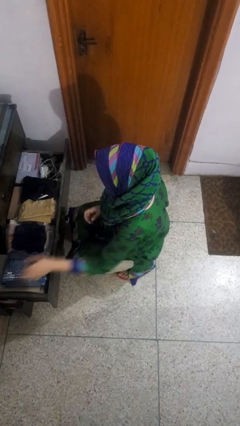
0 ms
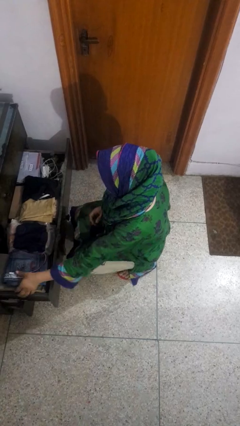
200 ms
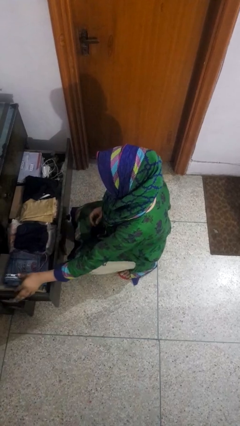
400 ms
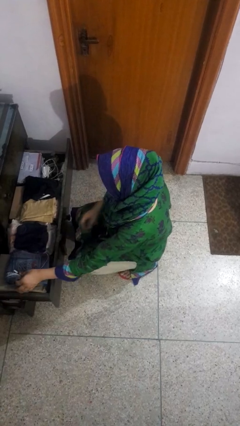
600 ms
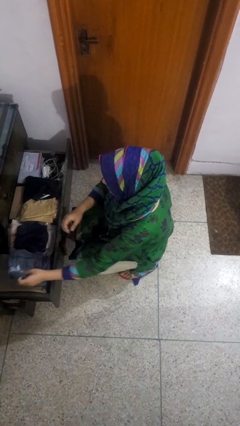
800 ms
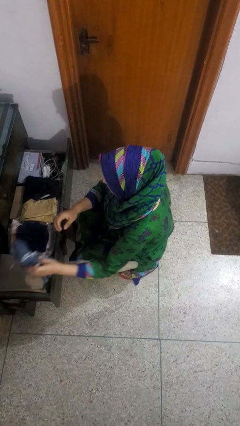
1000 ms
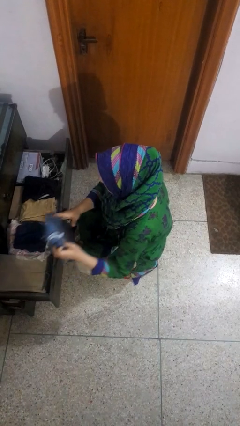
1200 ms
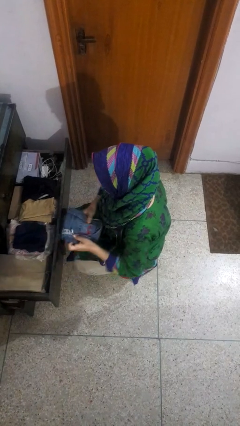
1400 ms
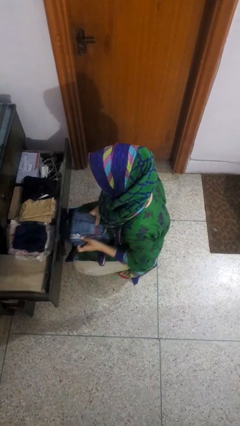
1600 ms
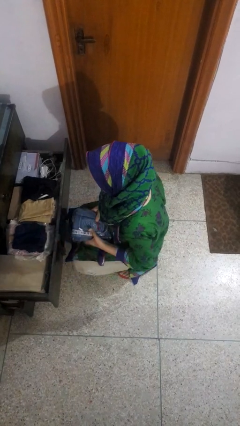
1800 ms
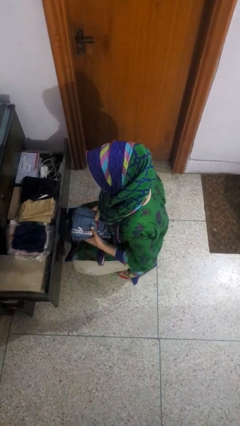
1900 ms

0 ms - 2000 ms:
person takes clothes from dresser

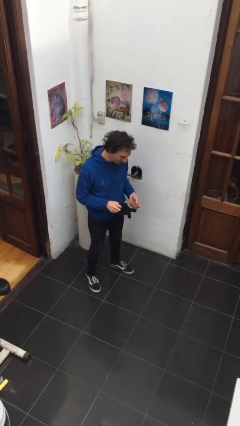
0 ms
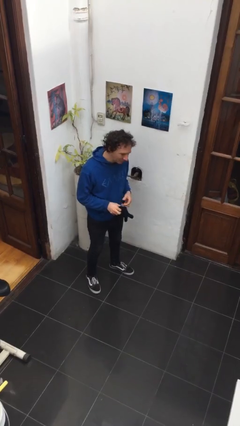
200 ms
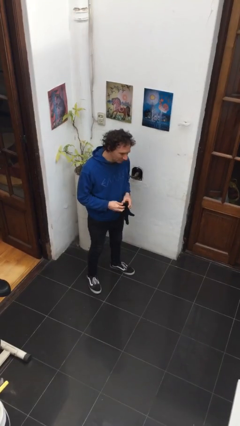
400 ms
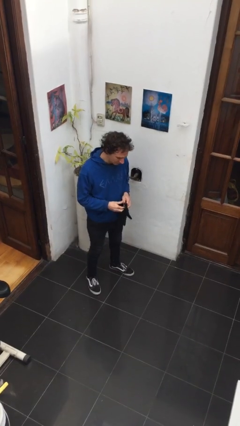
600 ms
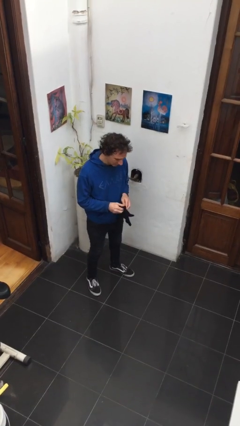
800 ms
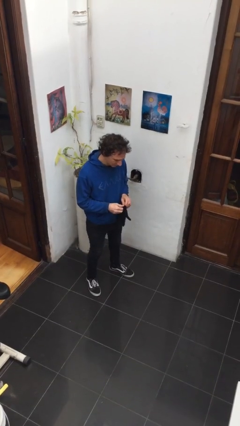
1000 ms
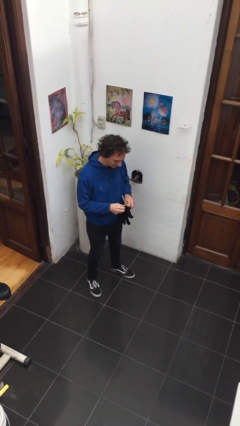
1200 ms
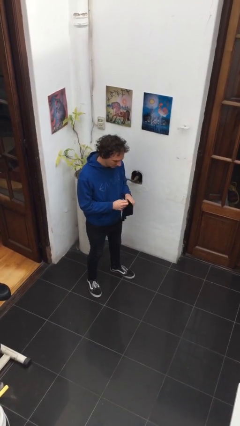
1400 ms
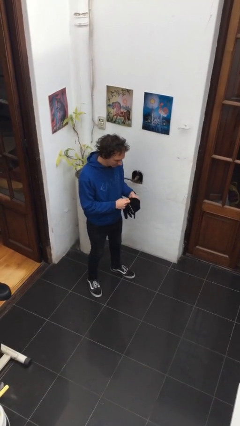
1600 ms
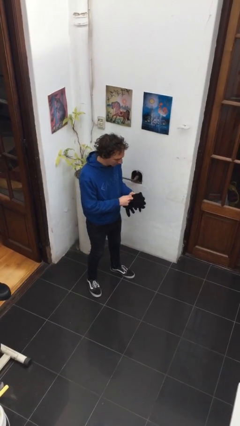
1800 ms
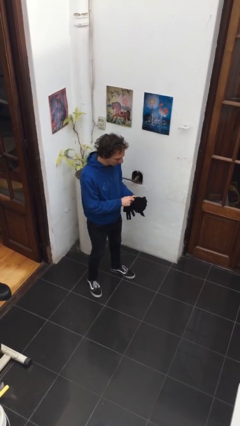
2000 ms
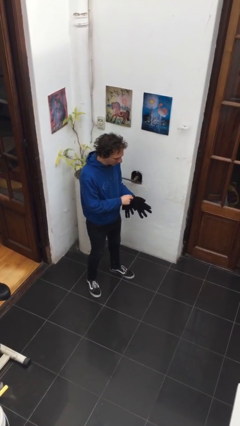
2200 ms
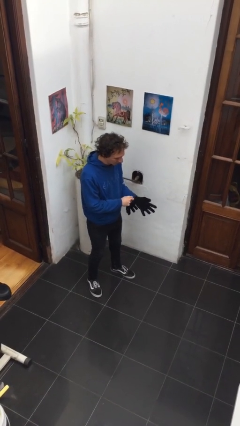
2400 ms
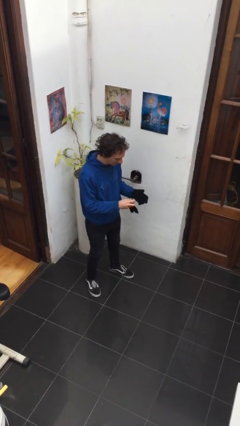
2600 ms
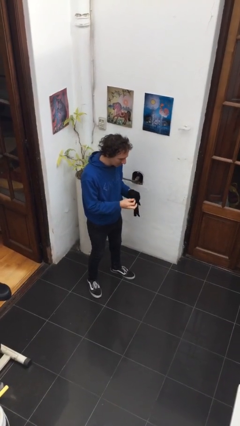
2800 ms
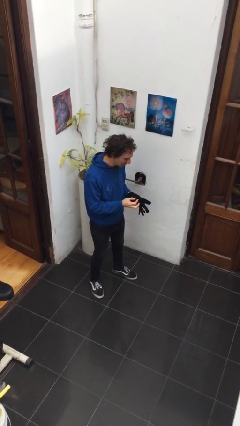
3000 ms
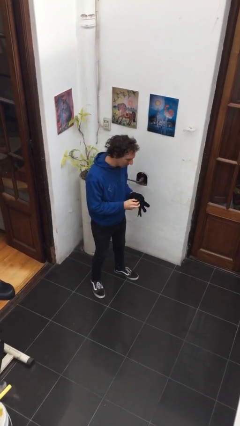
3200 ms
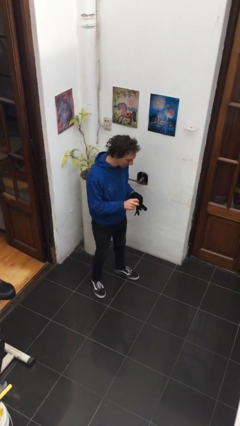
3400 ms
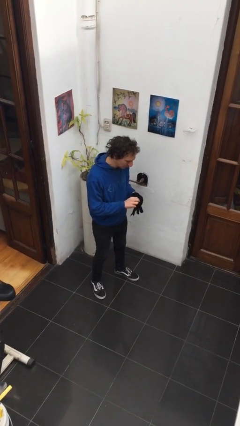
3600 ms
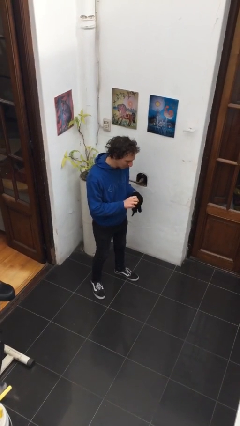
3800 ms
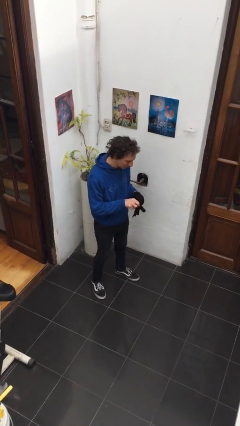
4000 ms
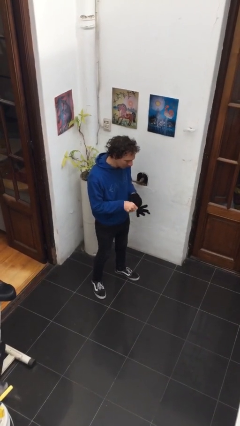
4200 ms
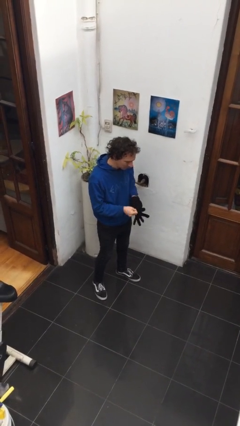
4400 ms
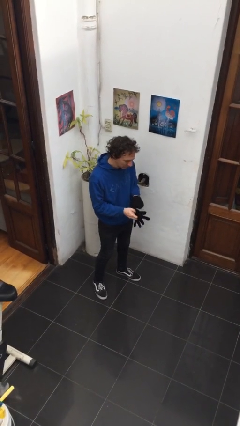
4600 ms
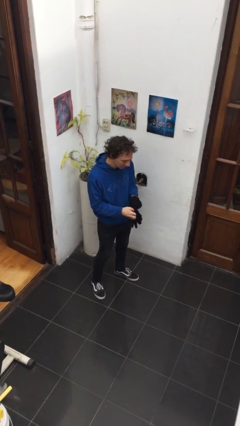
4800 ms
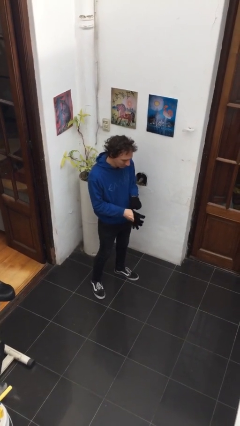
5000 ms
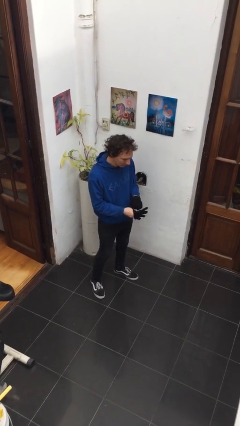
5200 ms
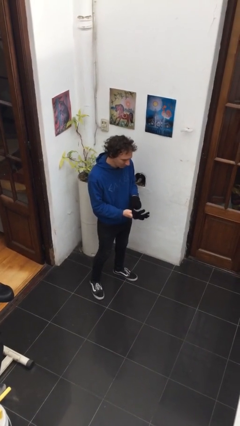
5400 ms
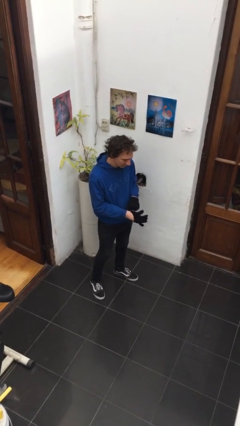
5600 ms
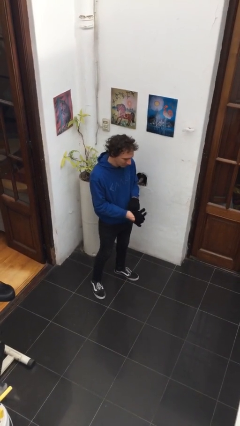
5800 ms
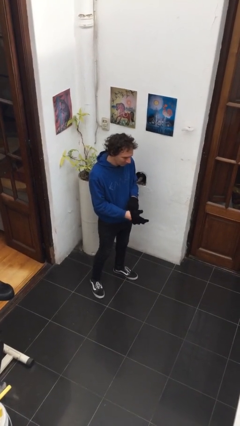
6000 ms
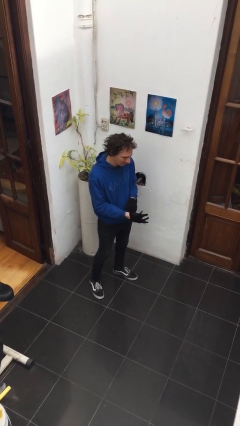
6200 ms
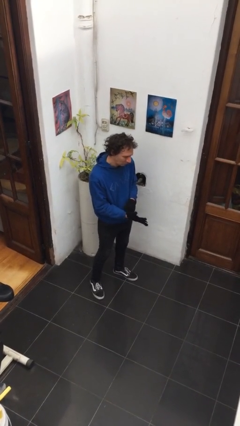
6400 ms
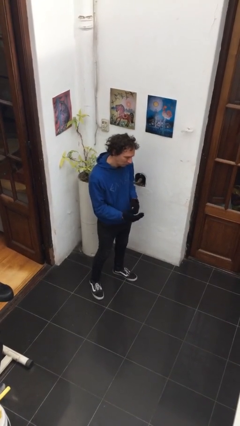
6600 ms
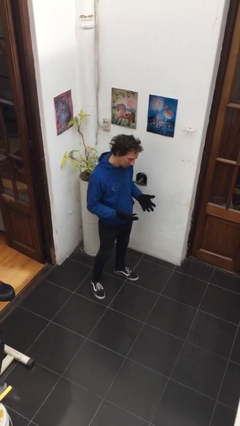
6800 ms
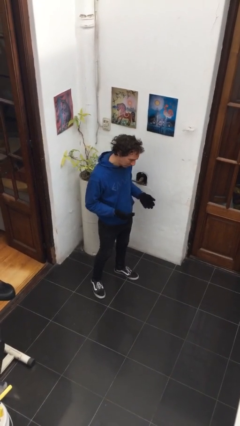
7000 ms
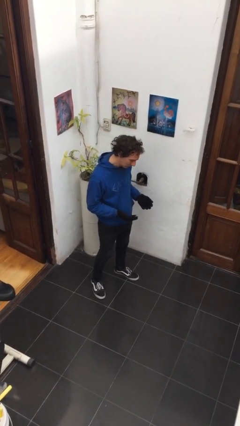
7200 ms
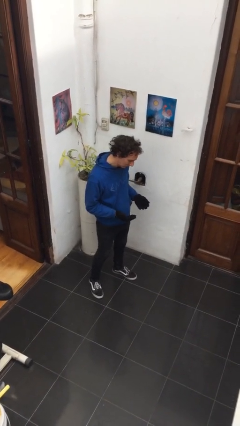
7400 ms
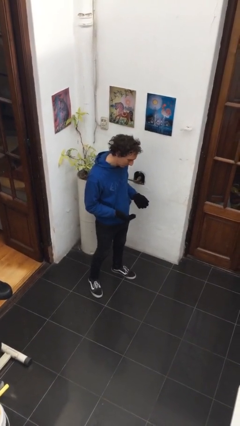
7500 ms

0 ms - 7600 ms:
person puts on gloves

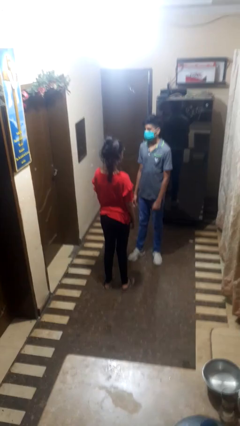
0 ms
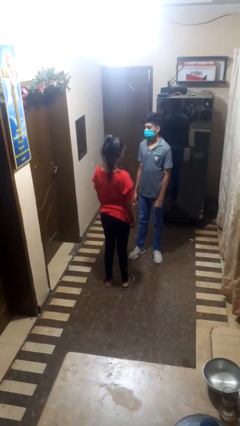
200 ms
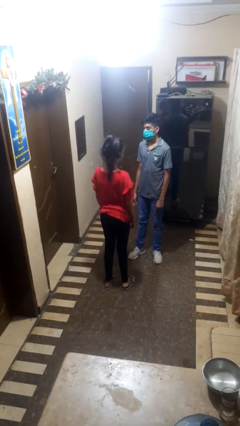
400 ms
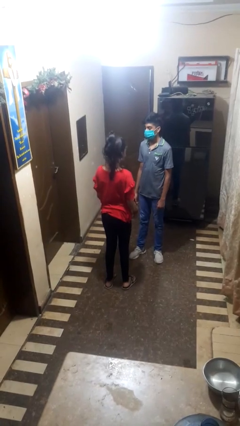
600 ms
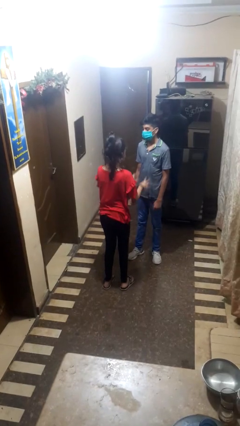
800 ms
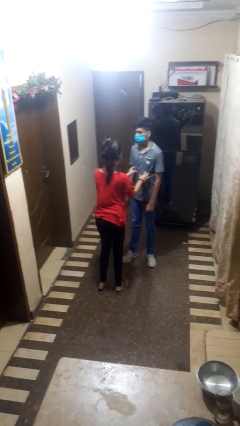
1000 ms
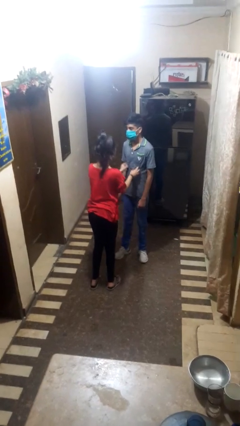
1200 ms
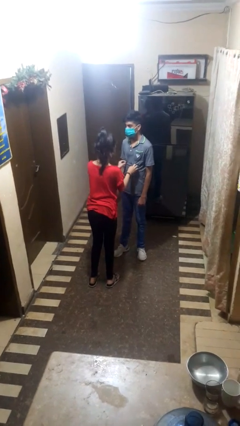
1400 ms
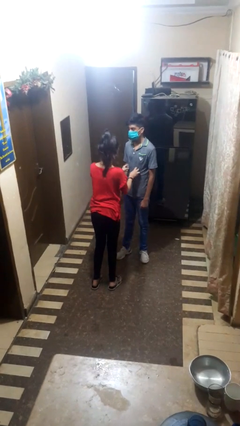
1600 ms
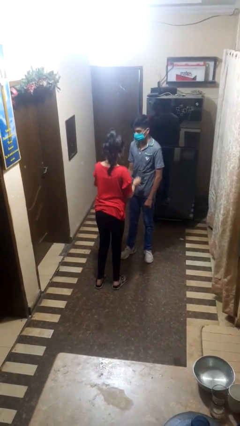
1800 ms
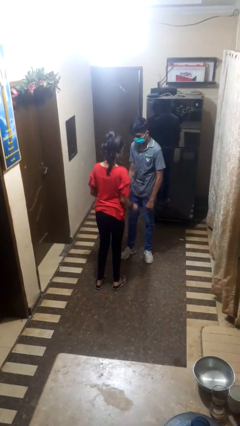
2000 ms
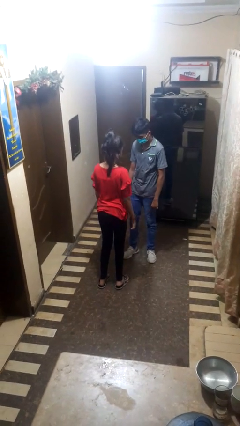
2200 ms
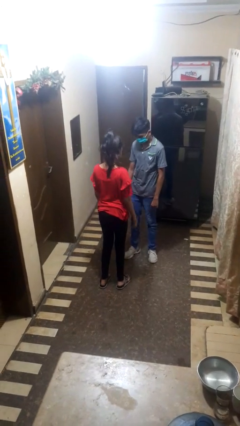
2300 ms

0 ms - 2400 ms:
person tickles person

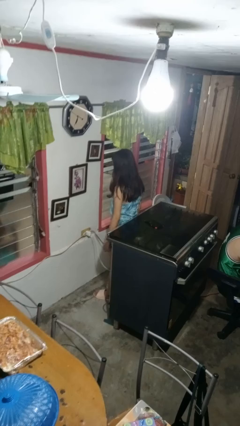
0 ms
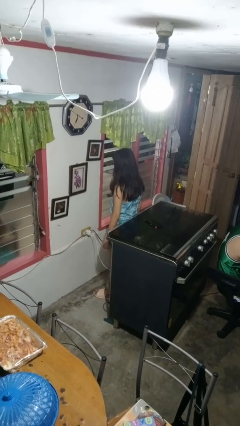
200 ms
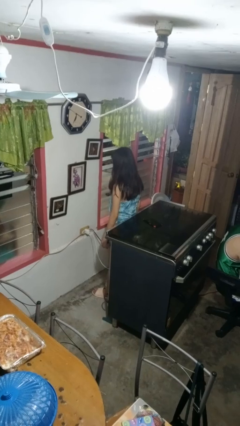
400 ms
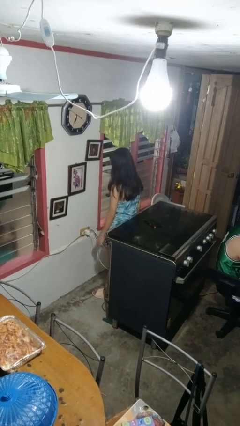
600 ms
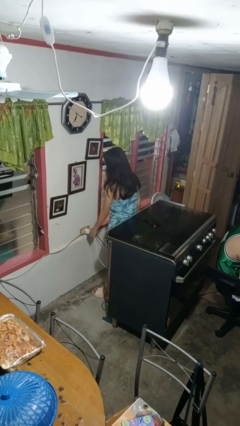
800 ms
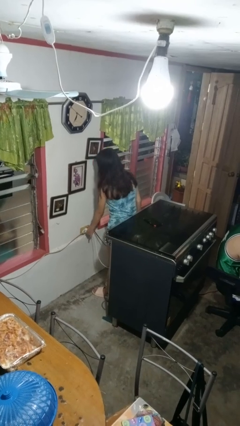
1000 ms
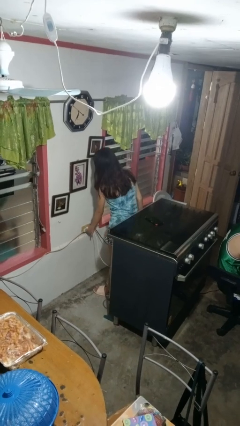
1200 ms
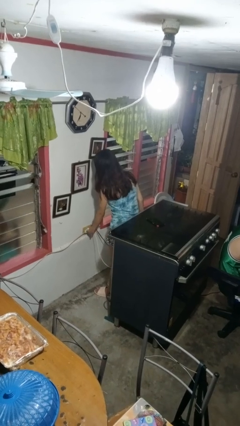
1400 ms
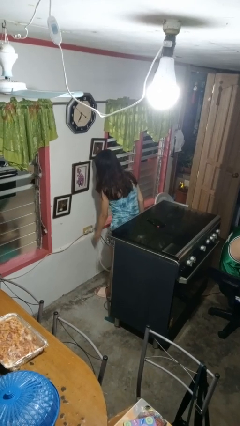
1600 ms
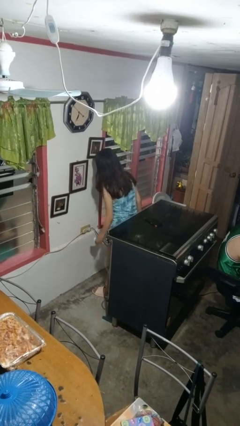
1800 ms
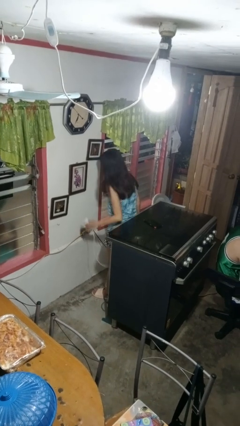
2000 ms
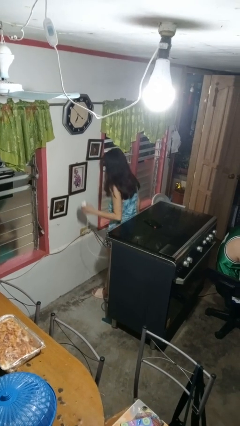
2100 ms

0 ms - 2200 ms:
person unplugs from electrical socket

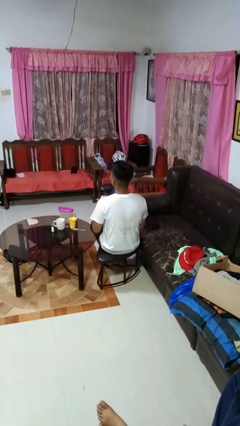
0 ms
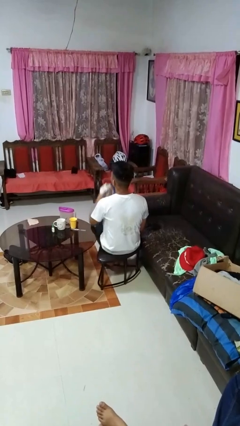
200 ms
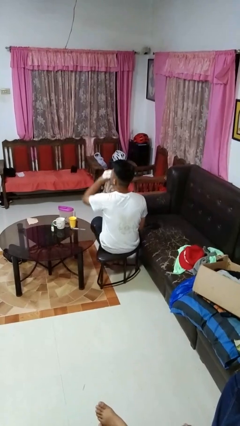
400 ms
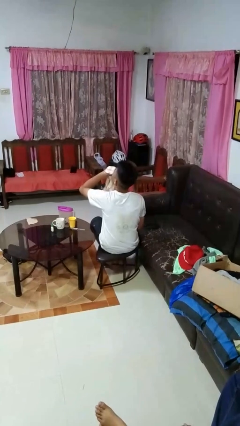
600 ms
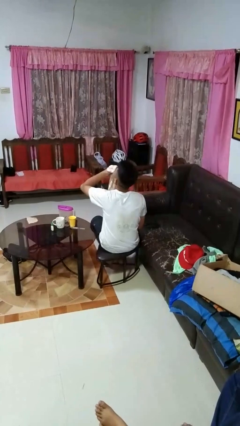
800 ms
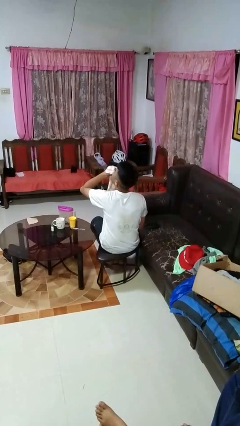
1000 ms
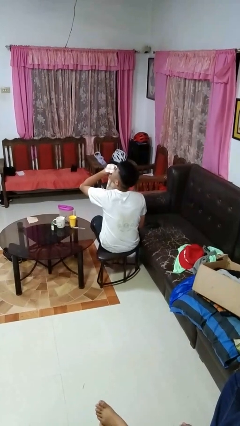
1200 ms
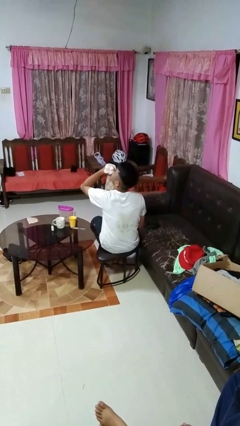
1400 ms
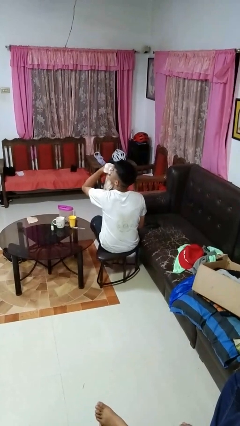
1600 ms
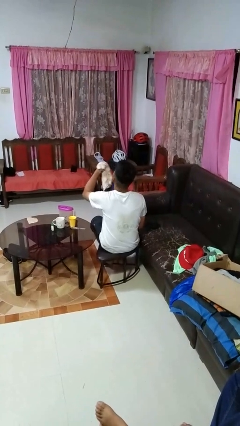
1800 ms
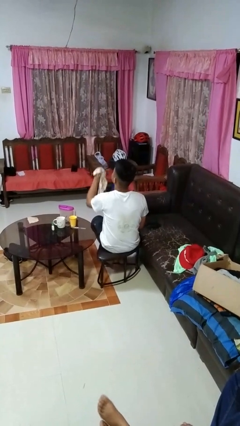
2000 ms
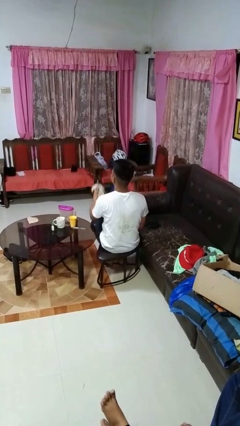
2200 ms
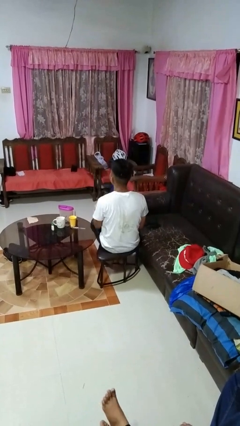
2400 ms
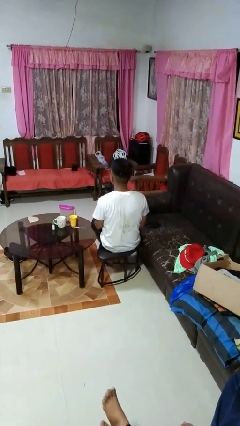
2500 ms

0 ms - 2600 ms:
person blows nose

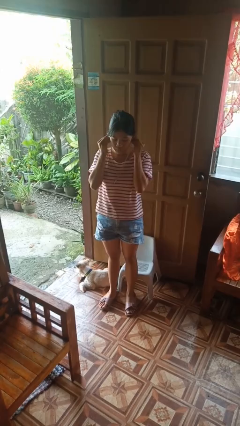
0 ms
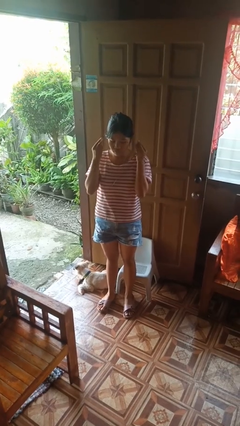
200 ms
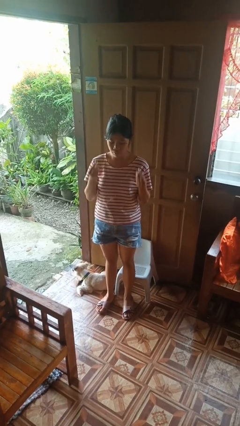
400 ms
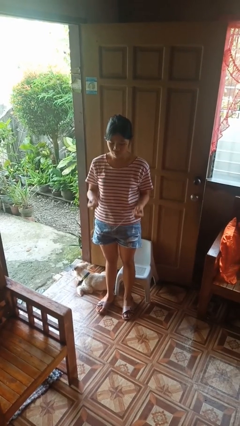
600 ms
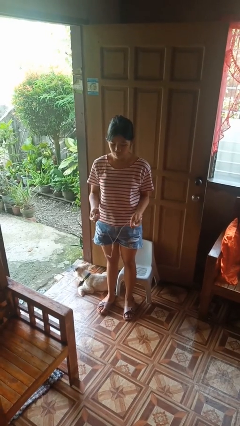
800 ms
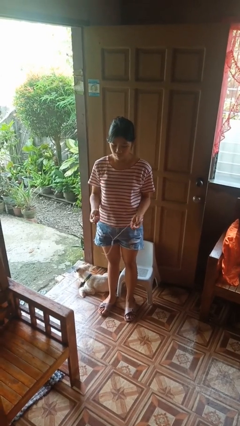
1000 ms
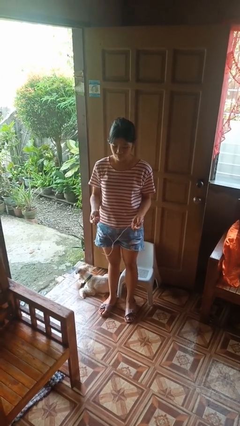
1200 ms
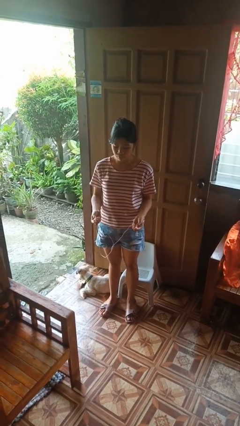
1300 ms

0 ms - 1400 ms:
person takes off headphones
